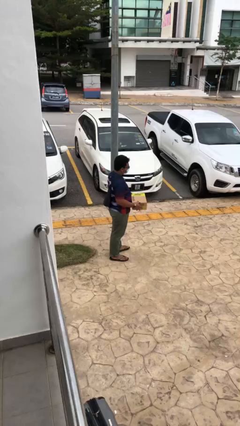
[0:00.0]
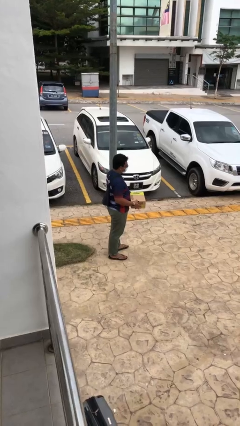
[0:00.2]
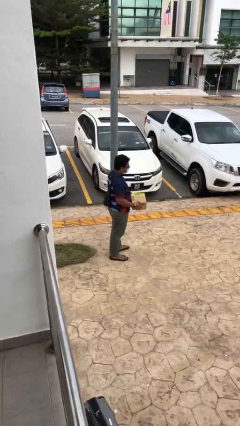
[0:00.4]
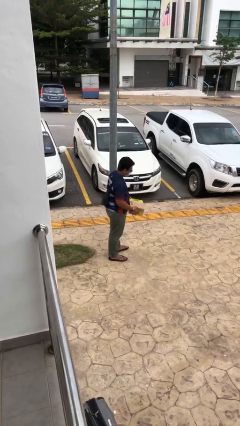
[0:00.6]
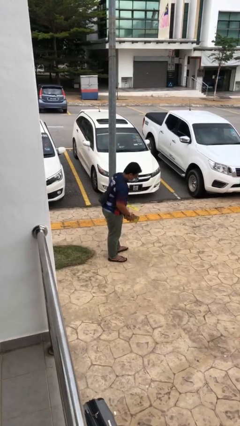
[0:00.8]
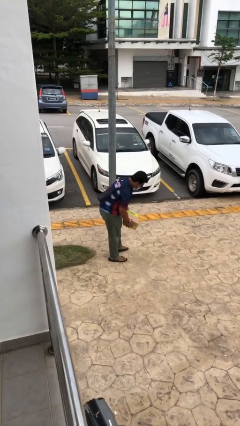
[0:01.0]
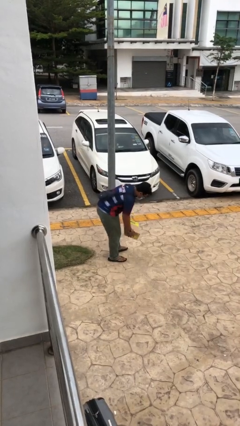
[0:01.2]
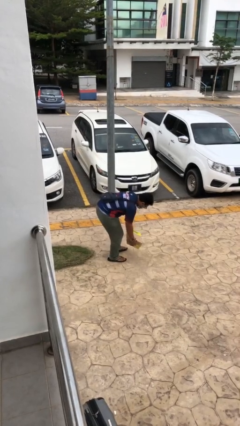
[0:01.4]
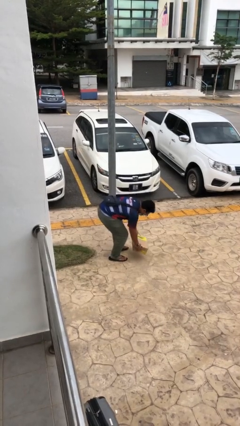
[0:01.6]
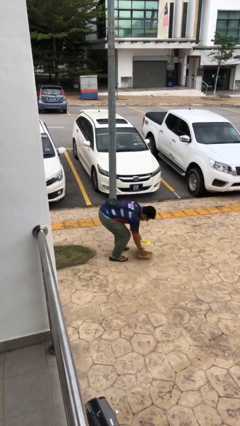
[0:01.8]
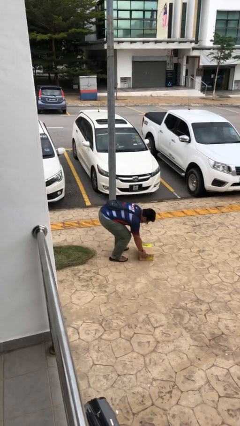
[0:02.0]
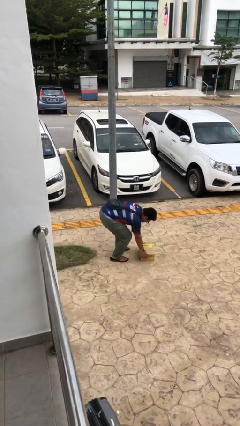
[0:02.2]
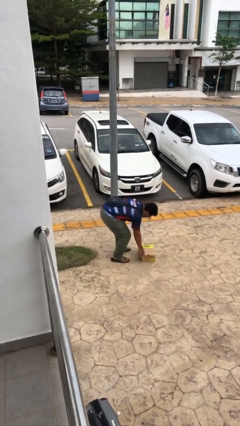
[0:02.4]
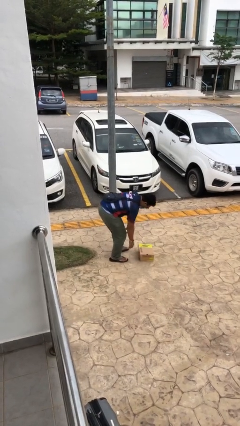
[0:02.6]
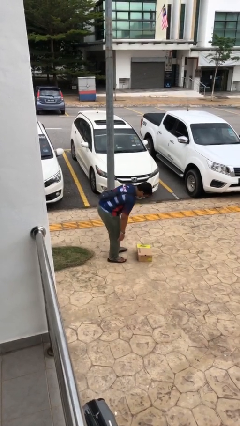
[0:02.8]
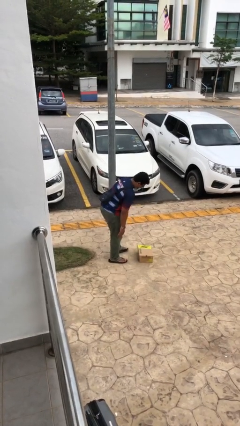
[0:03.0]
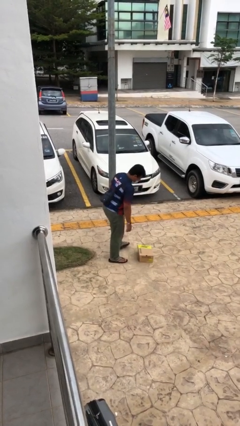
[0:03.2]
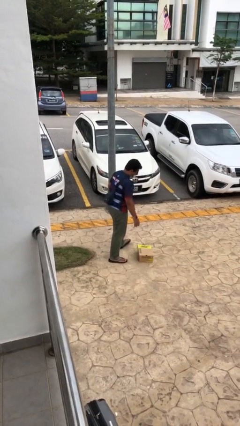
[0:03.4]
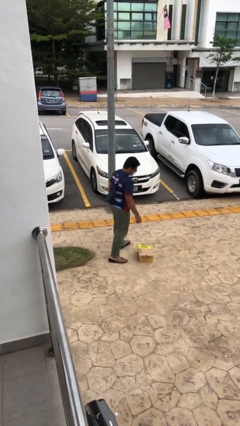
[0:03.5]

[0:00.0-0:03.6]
person puts down object on floor

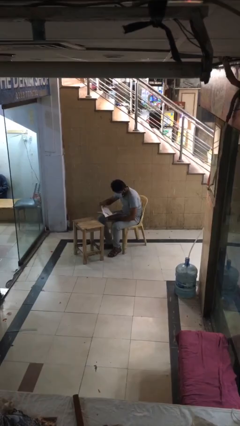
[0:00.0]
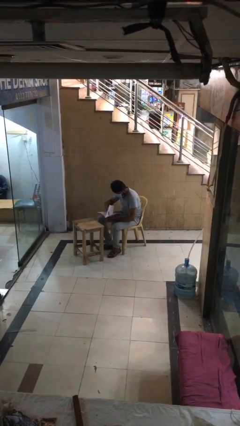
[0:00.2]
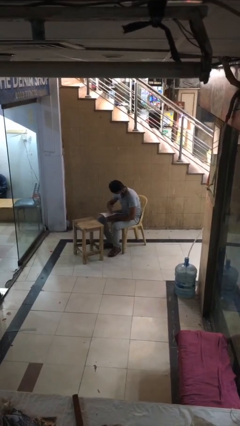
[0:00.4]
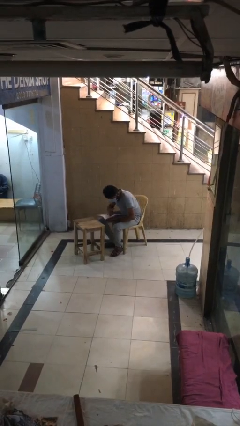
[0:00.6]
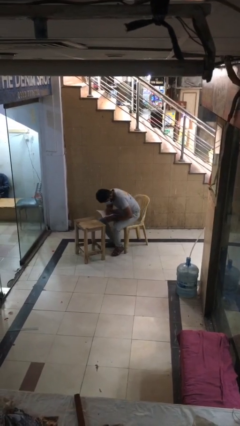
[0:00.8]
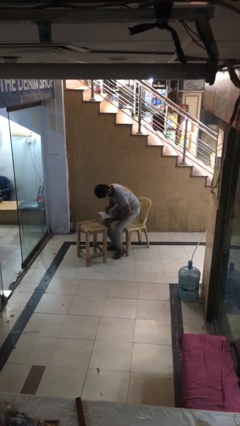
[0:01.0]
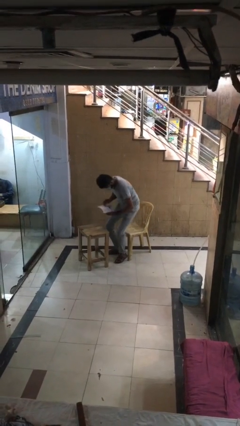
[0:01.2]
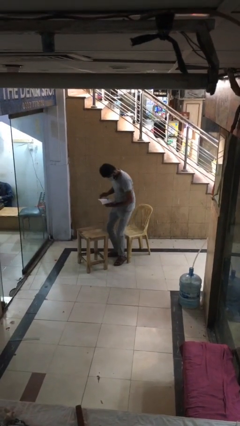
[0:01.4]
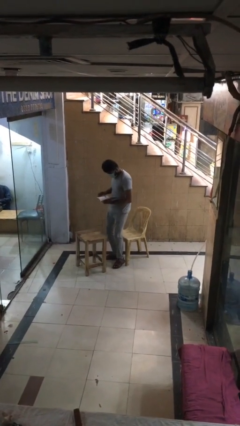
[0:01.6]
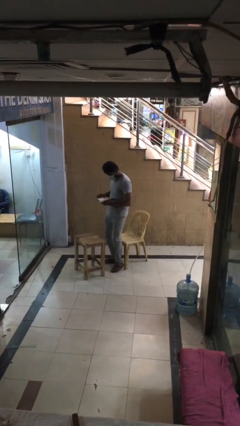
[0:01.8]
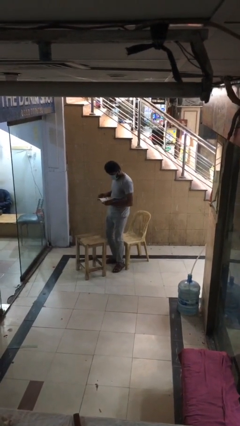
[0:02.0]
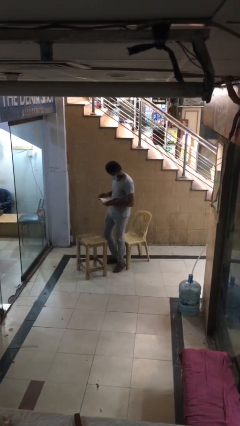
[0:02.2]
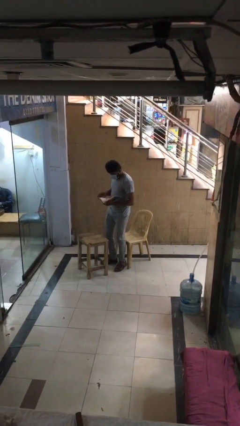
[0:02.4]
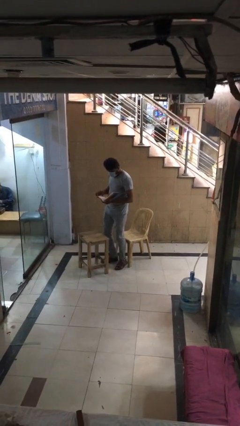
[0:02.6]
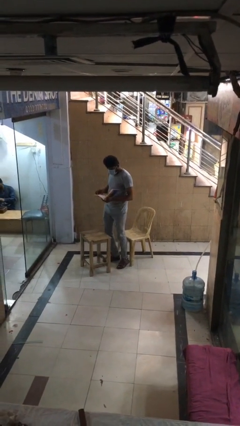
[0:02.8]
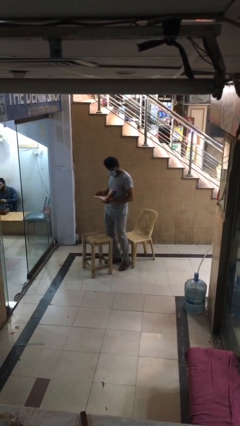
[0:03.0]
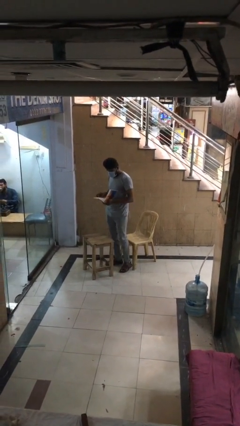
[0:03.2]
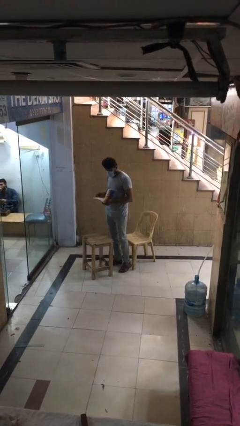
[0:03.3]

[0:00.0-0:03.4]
person stands up

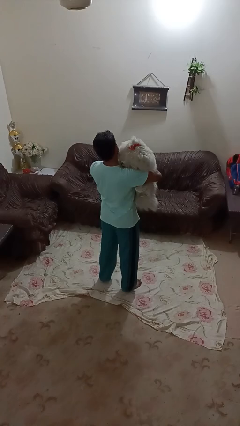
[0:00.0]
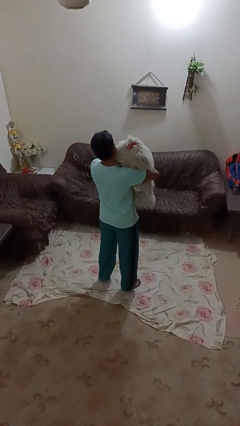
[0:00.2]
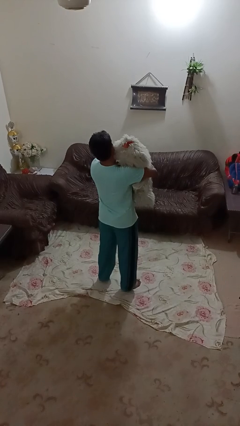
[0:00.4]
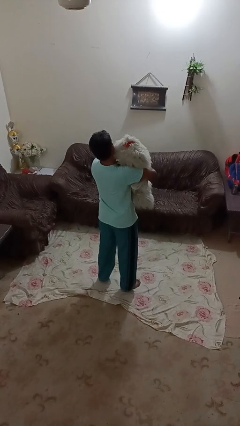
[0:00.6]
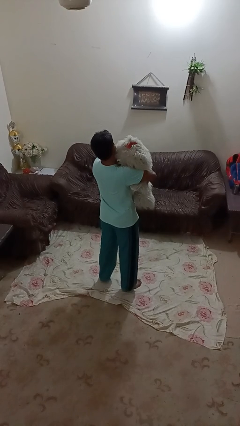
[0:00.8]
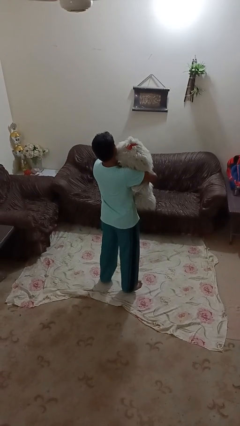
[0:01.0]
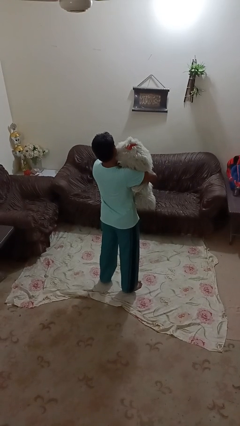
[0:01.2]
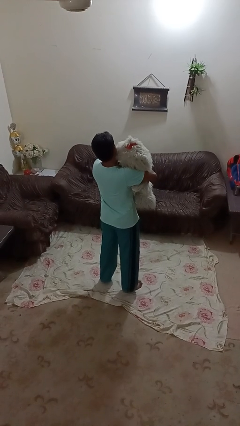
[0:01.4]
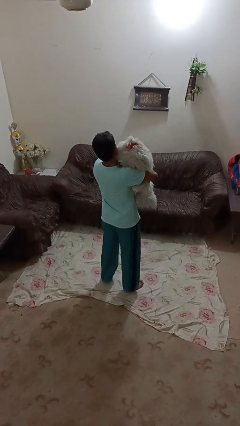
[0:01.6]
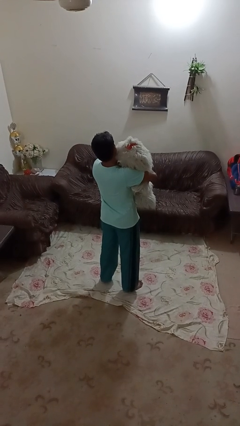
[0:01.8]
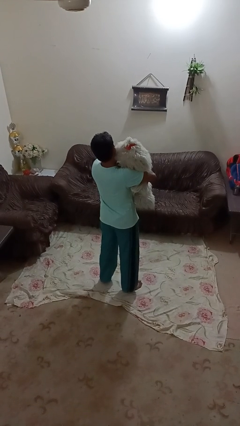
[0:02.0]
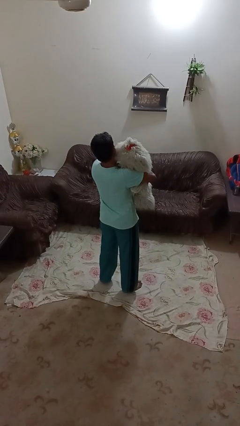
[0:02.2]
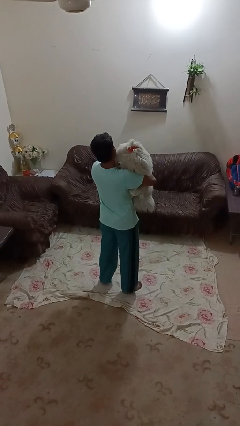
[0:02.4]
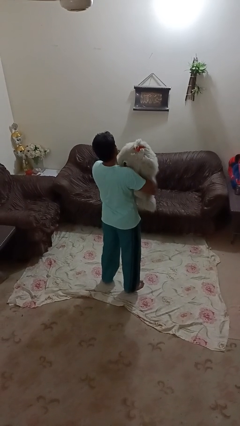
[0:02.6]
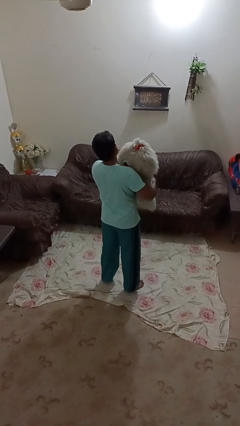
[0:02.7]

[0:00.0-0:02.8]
person hugs stuffed animal

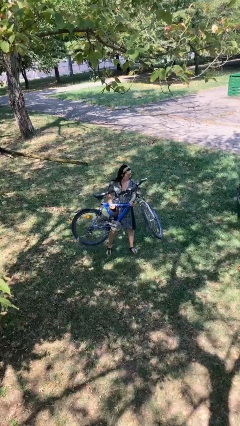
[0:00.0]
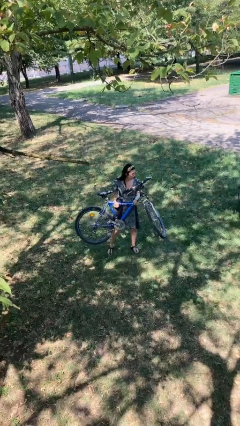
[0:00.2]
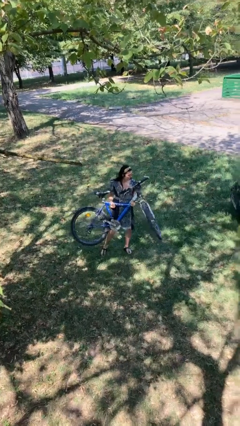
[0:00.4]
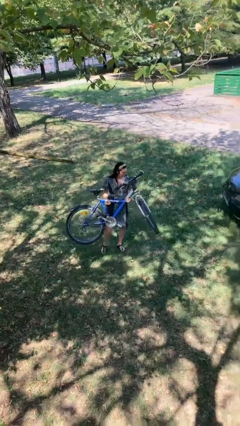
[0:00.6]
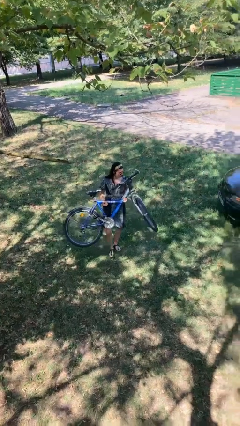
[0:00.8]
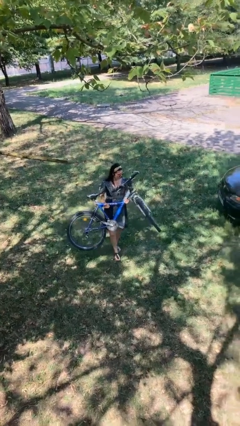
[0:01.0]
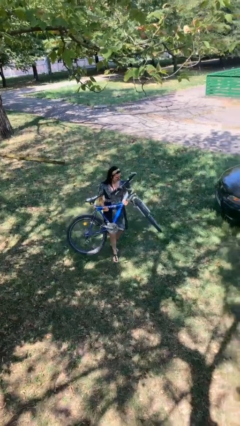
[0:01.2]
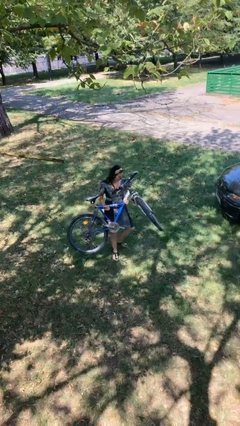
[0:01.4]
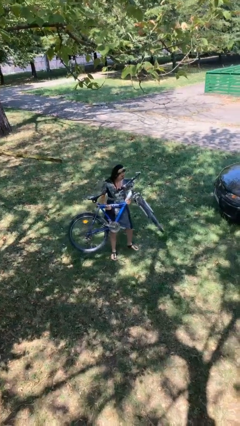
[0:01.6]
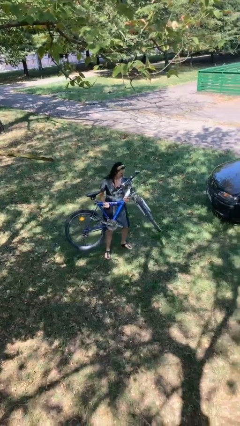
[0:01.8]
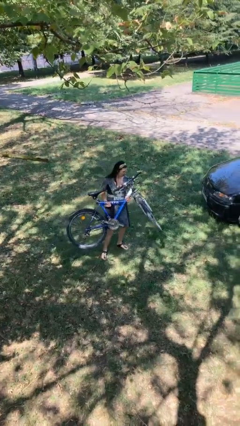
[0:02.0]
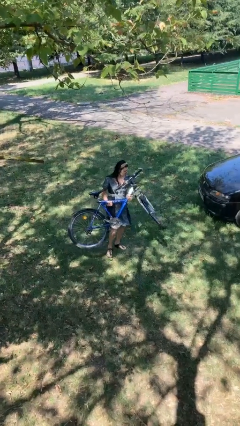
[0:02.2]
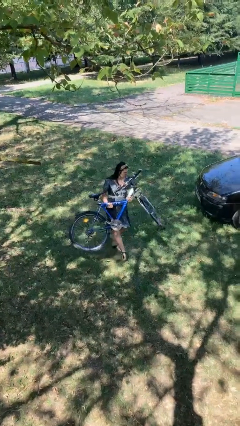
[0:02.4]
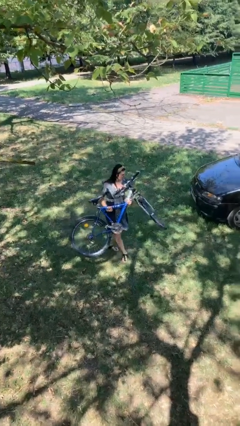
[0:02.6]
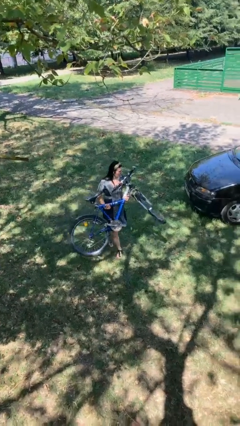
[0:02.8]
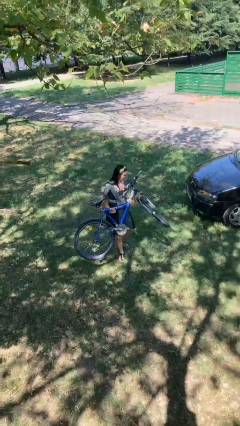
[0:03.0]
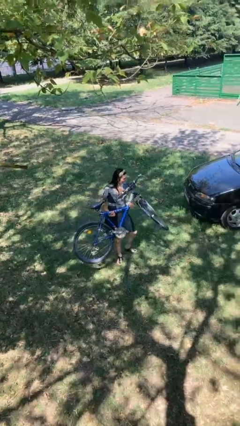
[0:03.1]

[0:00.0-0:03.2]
person carries bicycle

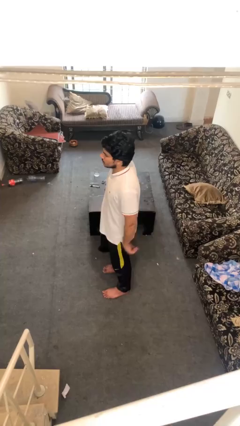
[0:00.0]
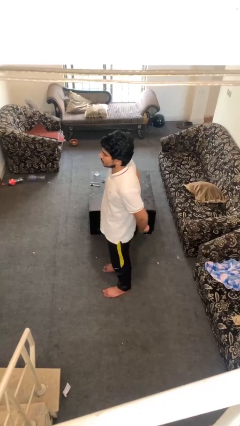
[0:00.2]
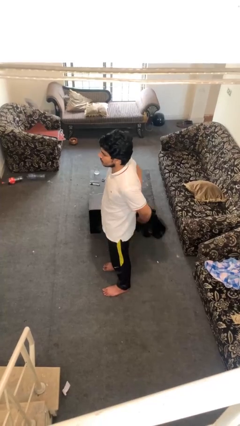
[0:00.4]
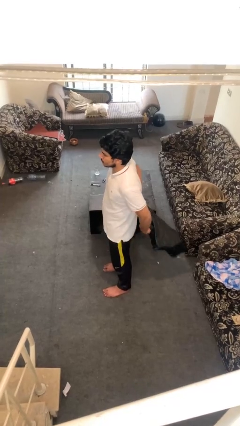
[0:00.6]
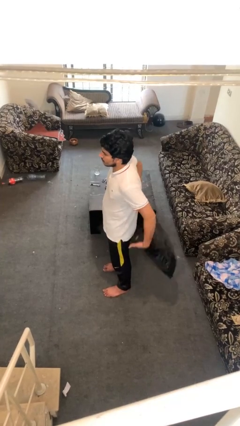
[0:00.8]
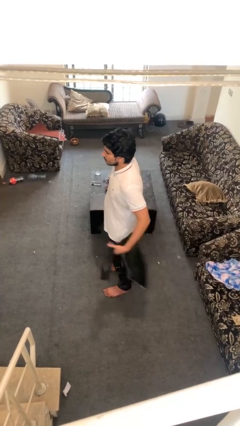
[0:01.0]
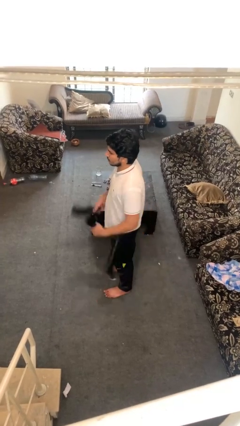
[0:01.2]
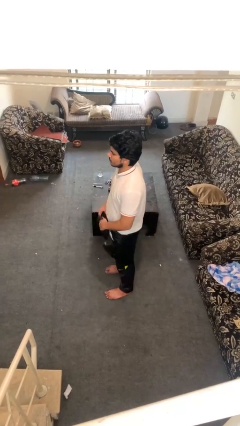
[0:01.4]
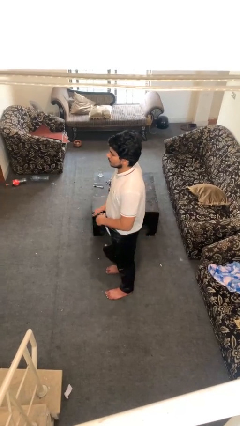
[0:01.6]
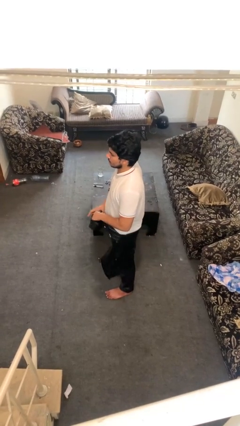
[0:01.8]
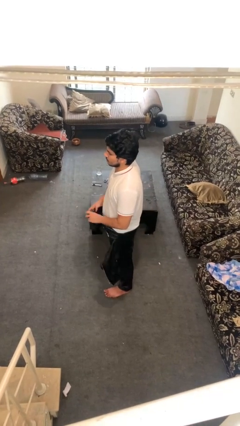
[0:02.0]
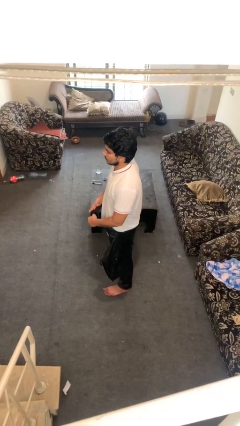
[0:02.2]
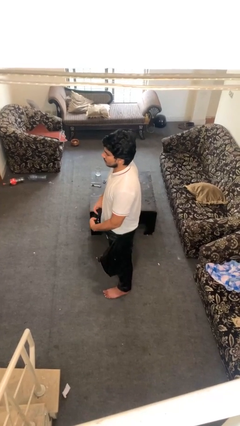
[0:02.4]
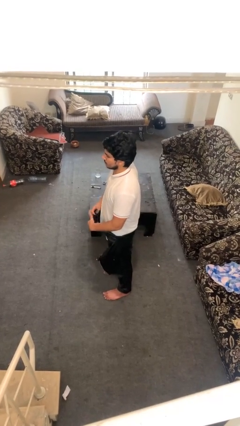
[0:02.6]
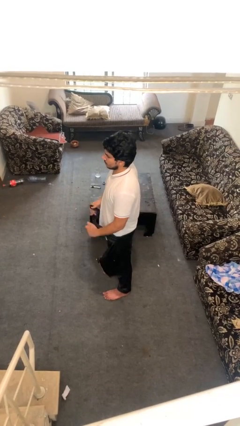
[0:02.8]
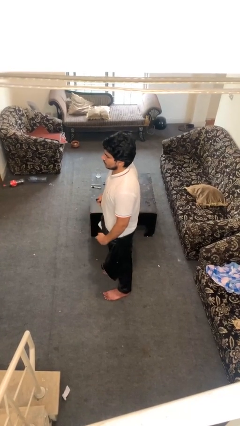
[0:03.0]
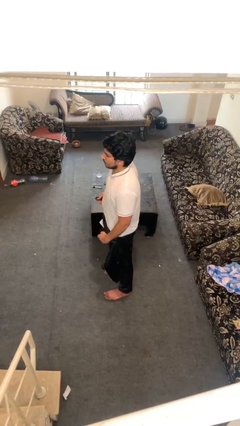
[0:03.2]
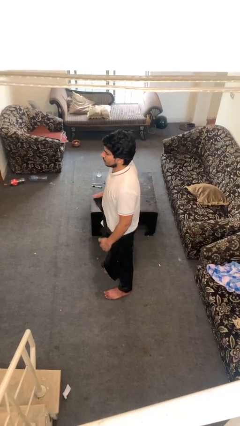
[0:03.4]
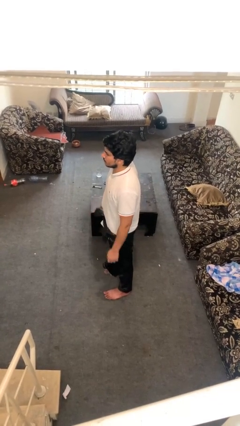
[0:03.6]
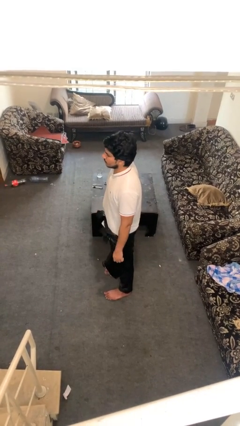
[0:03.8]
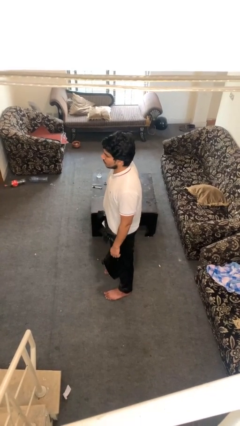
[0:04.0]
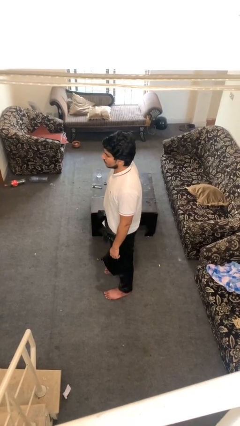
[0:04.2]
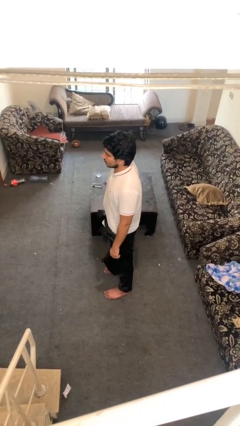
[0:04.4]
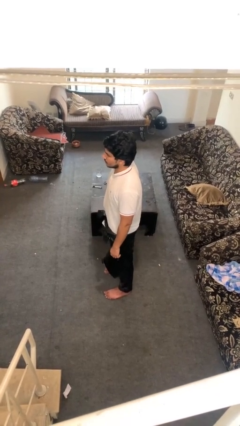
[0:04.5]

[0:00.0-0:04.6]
person ties jacket around waist
